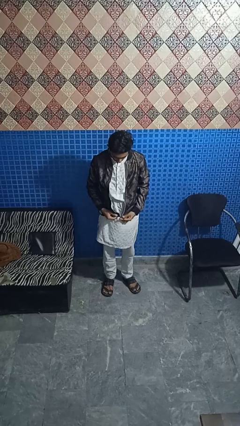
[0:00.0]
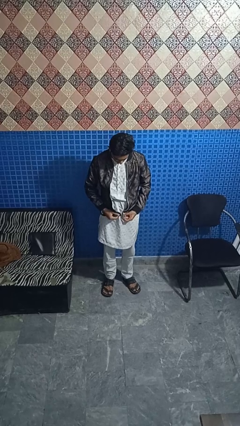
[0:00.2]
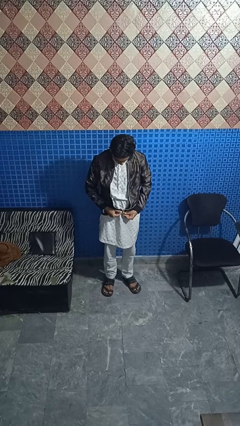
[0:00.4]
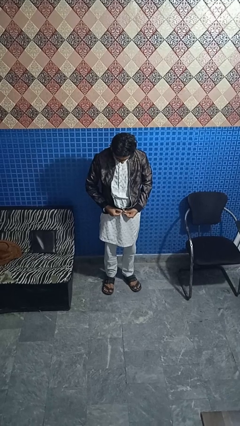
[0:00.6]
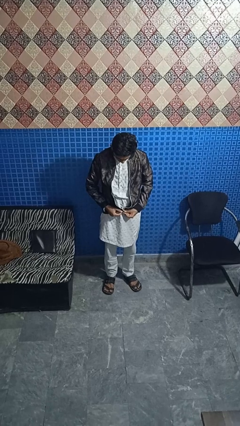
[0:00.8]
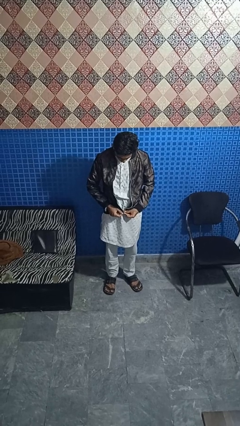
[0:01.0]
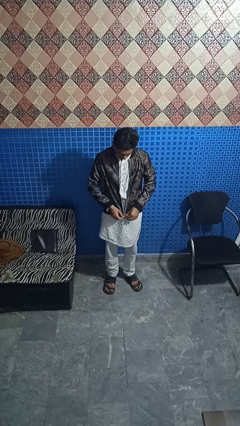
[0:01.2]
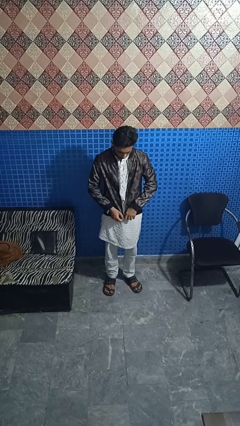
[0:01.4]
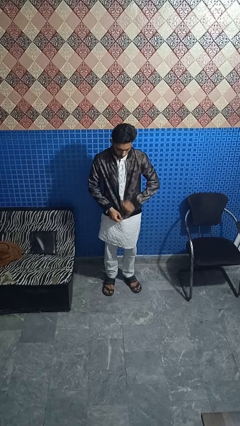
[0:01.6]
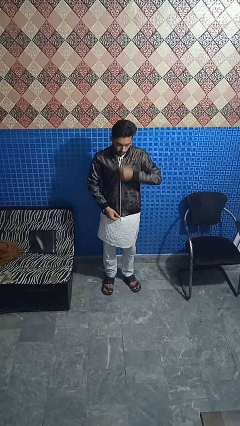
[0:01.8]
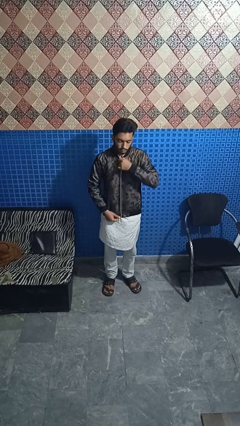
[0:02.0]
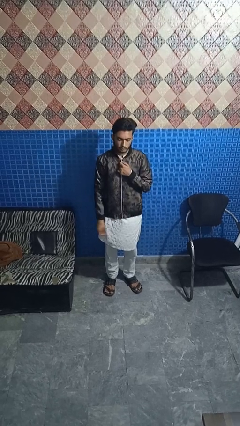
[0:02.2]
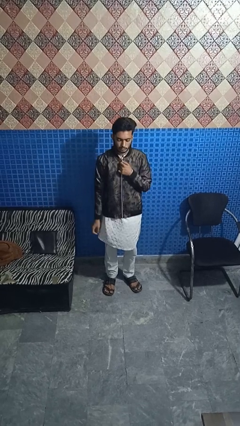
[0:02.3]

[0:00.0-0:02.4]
person zips up jacket

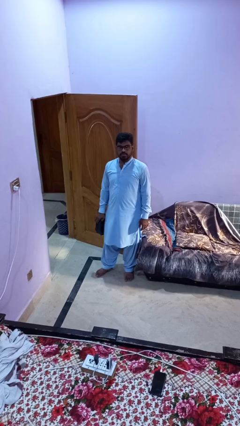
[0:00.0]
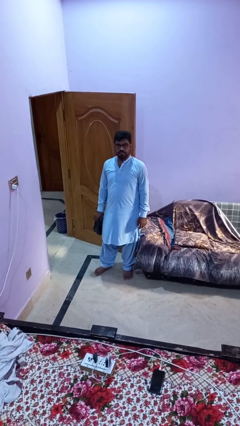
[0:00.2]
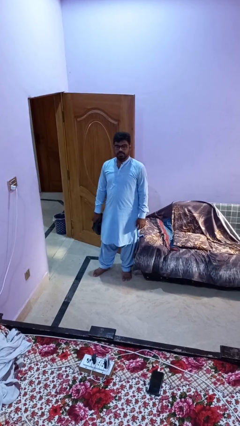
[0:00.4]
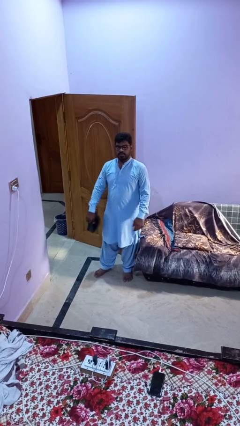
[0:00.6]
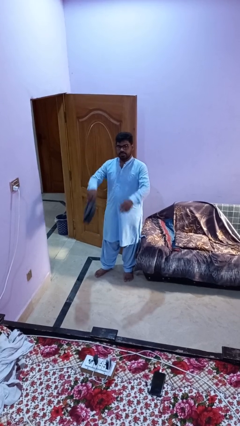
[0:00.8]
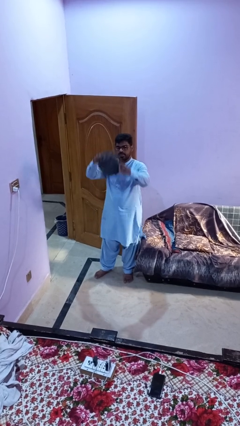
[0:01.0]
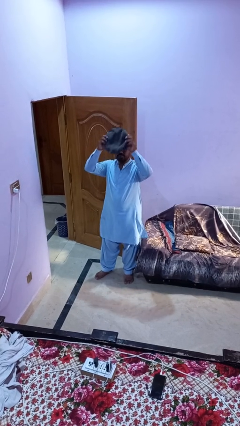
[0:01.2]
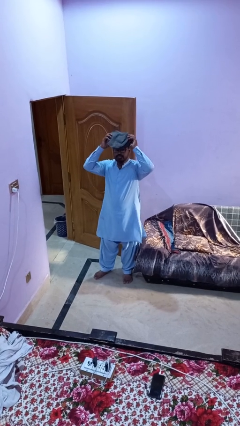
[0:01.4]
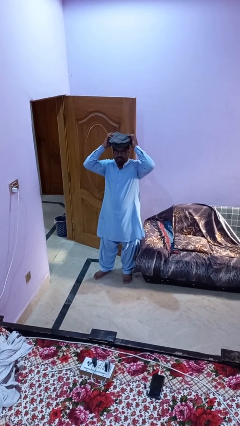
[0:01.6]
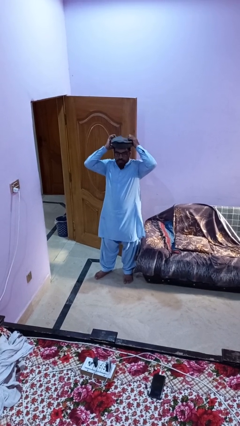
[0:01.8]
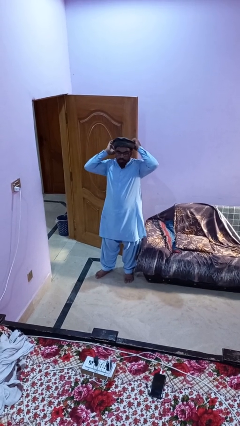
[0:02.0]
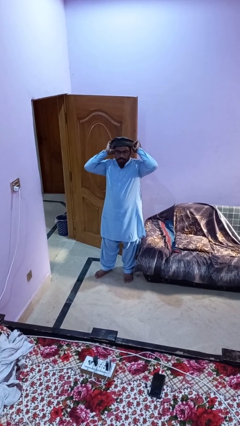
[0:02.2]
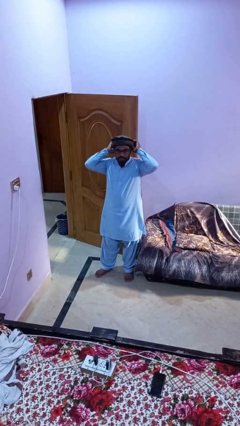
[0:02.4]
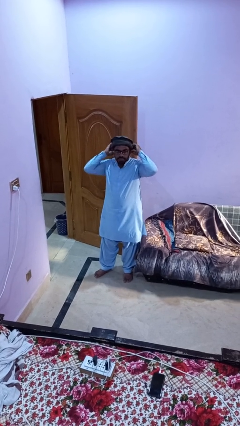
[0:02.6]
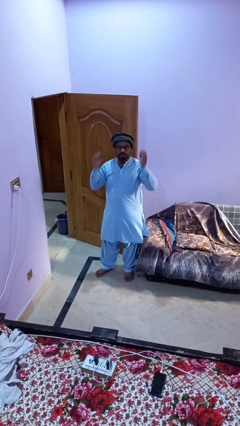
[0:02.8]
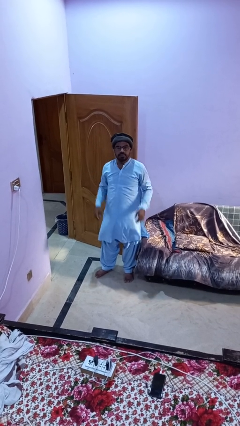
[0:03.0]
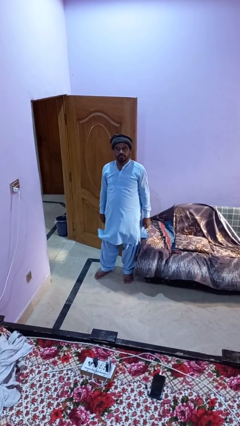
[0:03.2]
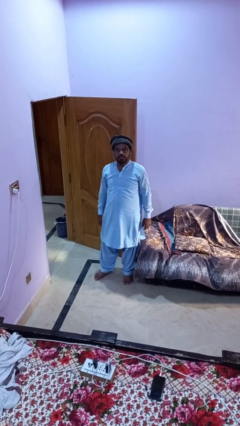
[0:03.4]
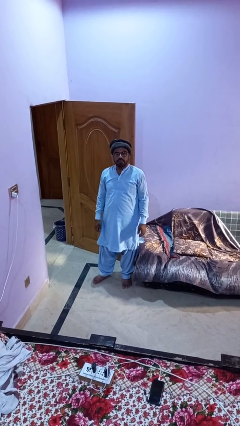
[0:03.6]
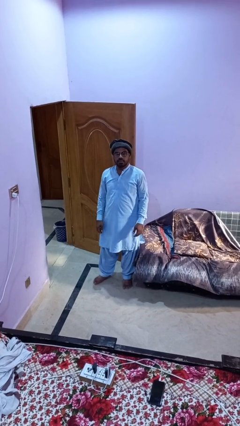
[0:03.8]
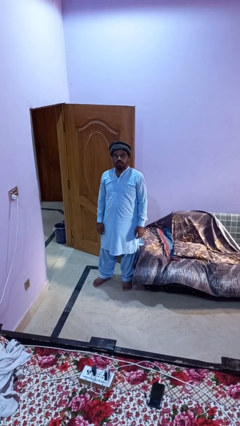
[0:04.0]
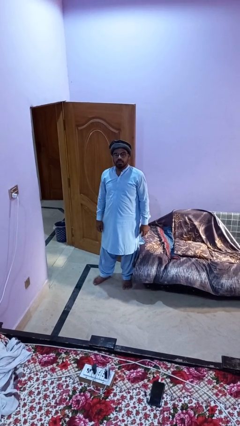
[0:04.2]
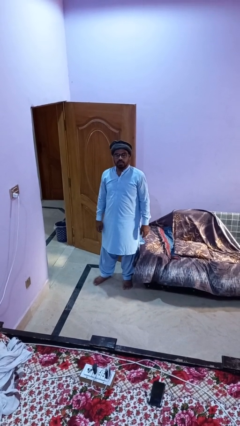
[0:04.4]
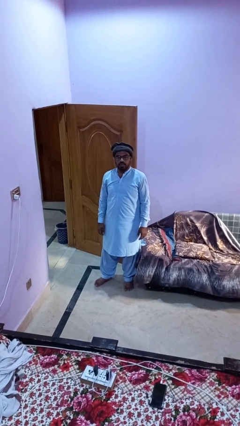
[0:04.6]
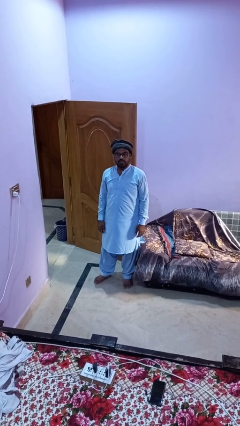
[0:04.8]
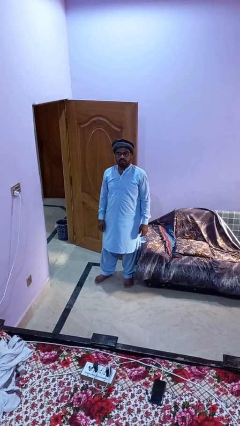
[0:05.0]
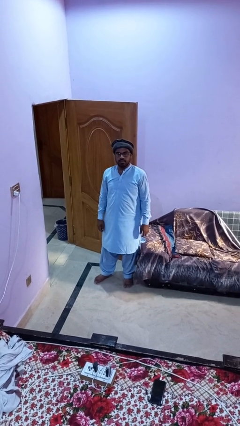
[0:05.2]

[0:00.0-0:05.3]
person puts on hat

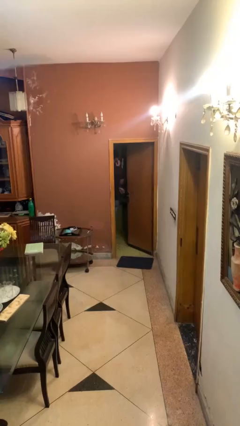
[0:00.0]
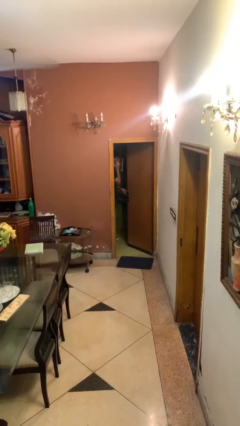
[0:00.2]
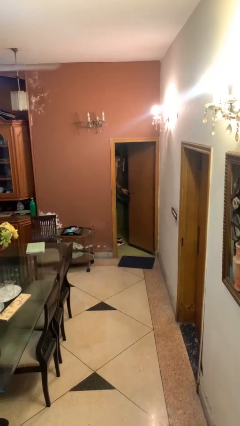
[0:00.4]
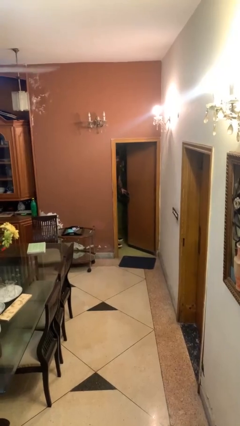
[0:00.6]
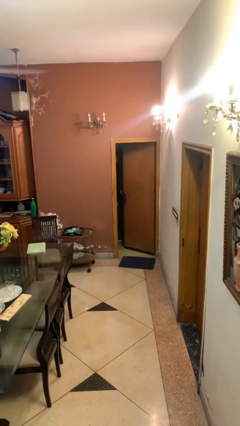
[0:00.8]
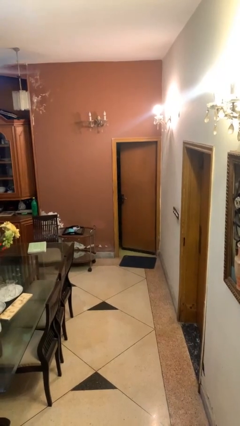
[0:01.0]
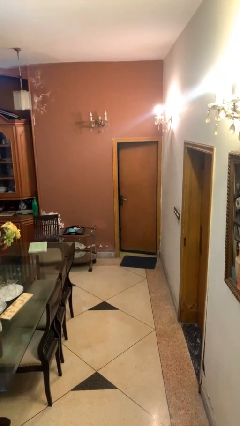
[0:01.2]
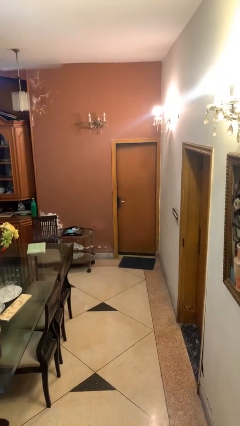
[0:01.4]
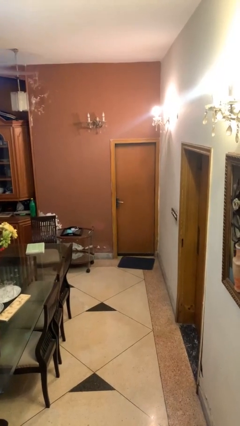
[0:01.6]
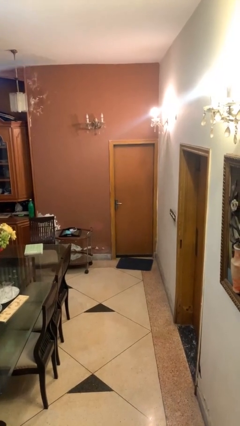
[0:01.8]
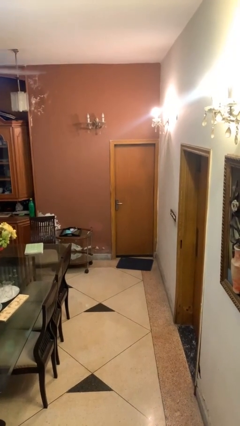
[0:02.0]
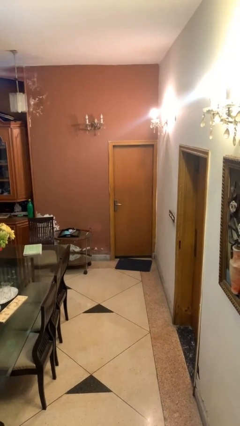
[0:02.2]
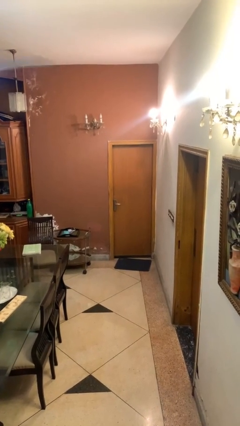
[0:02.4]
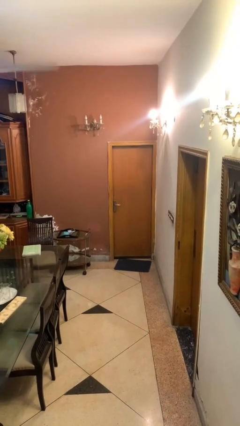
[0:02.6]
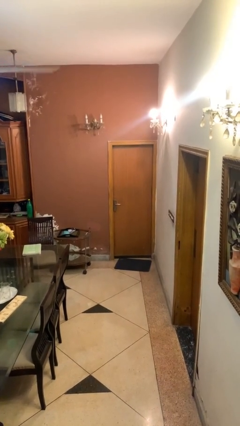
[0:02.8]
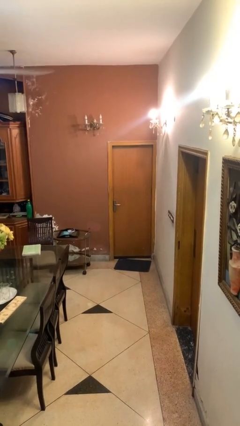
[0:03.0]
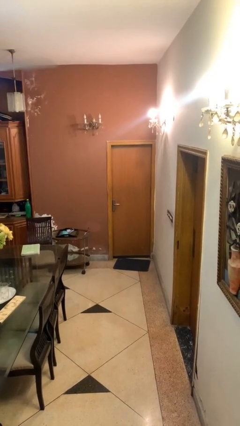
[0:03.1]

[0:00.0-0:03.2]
person closes facility door

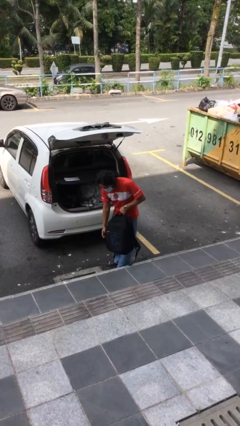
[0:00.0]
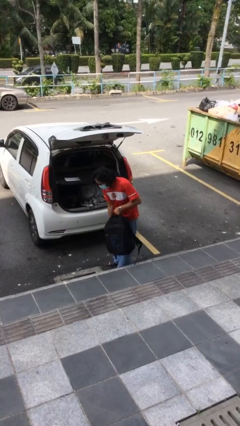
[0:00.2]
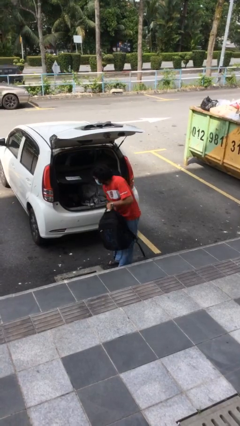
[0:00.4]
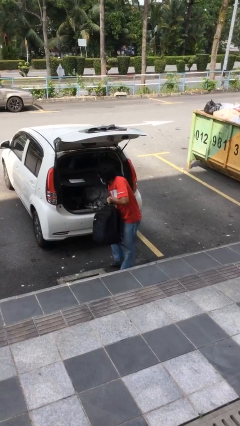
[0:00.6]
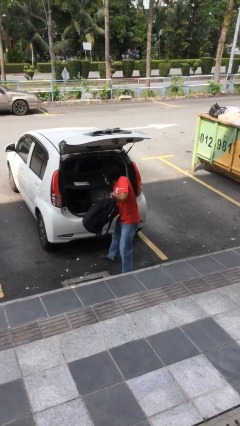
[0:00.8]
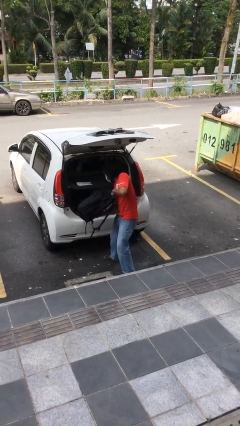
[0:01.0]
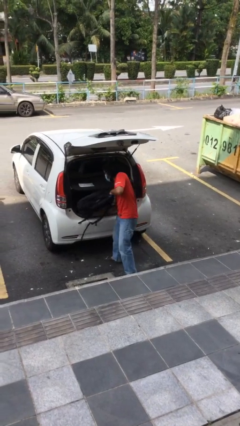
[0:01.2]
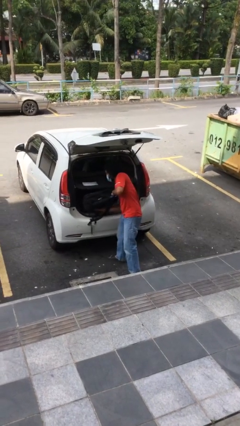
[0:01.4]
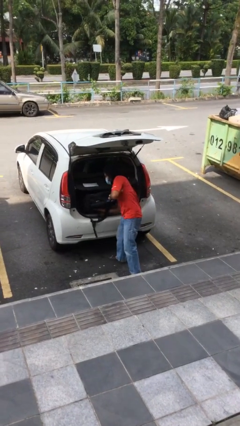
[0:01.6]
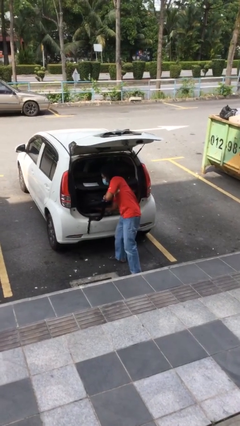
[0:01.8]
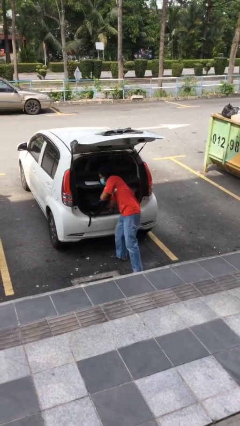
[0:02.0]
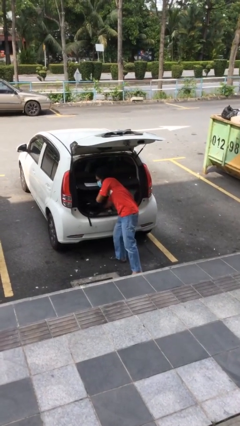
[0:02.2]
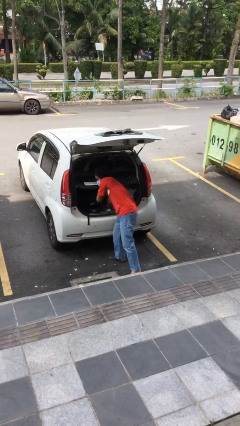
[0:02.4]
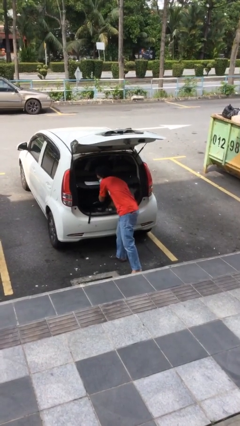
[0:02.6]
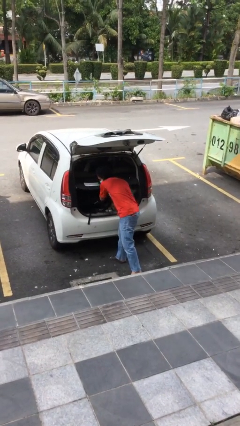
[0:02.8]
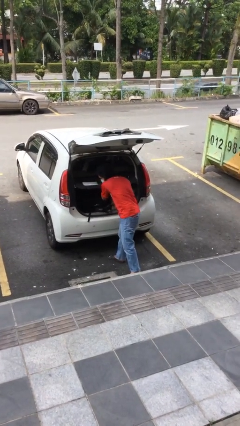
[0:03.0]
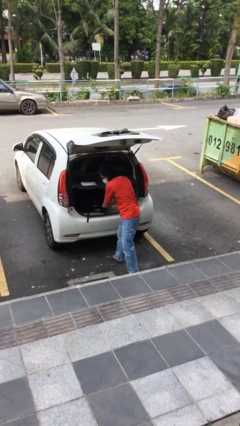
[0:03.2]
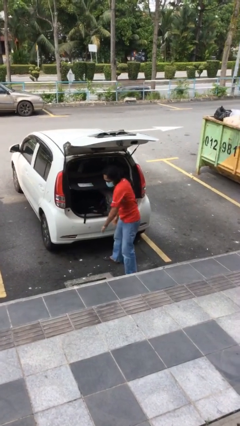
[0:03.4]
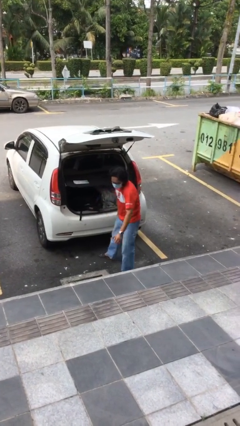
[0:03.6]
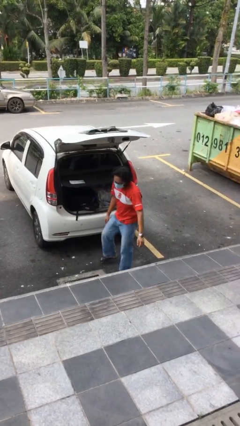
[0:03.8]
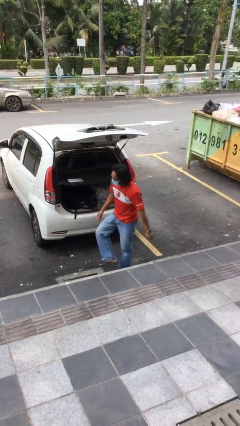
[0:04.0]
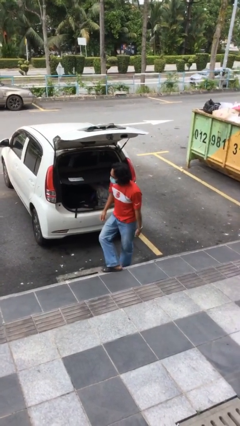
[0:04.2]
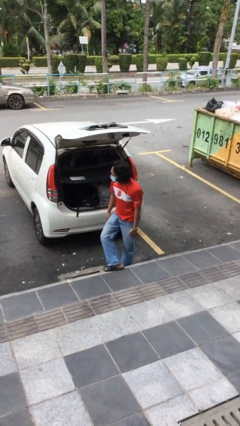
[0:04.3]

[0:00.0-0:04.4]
person loads car

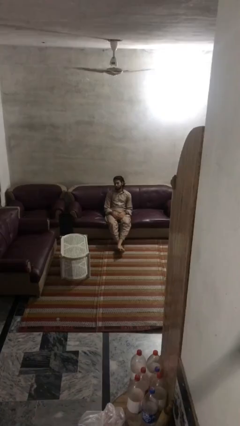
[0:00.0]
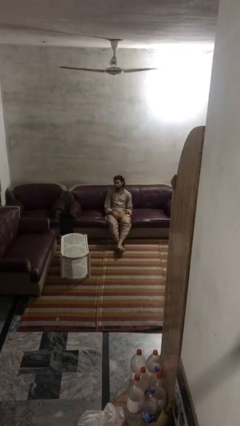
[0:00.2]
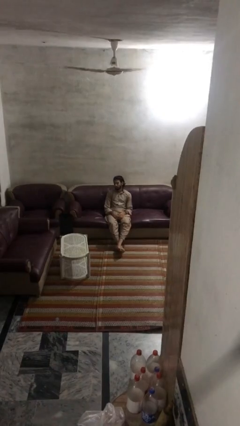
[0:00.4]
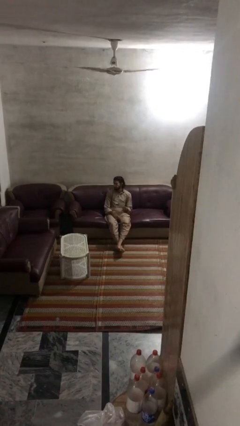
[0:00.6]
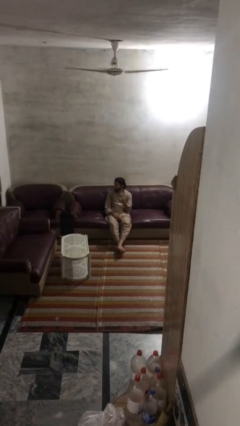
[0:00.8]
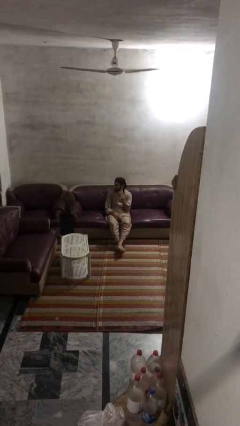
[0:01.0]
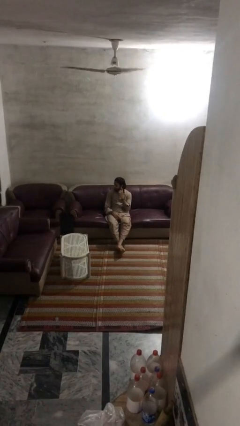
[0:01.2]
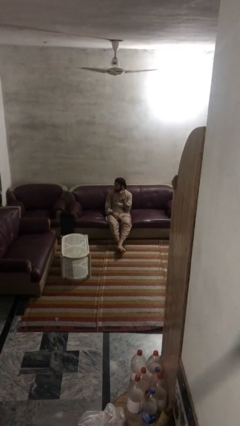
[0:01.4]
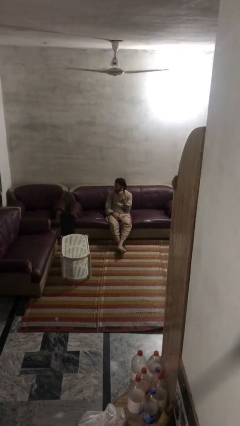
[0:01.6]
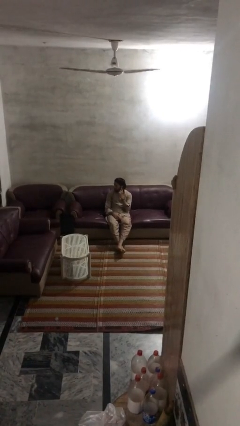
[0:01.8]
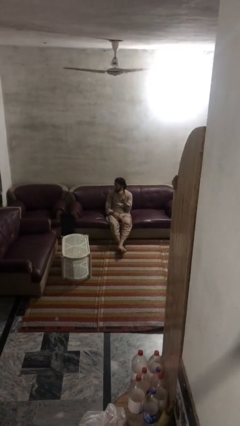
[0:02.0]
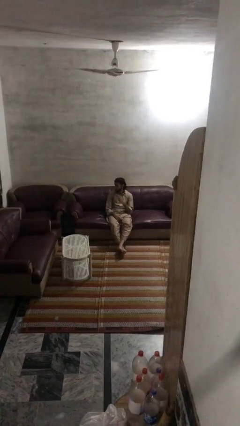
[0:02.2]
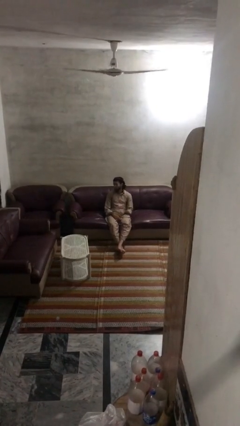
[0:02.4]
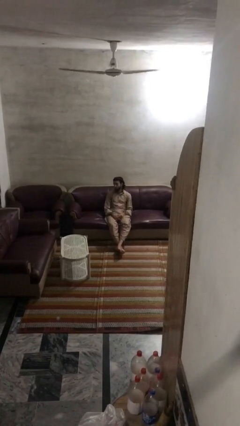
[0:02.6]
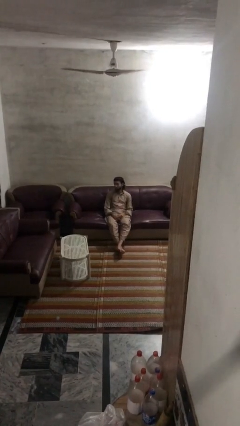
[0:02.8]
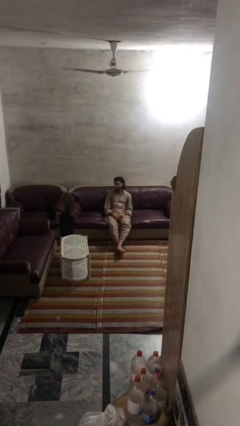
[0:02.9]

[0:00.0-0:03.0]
person gestures listen closely
